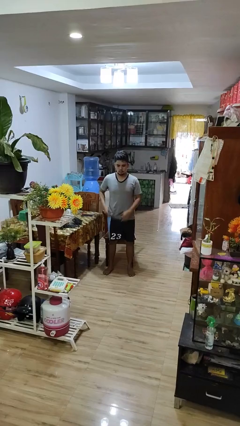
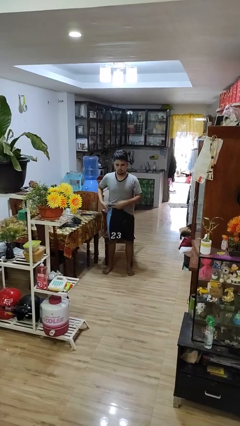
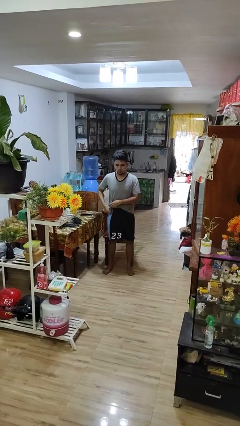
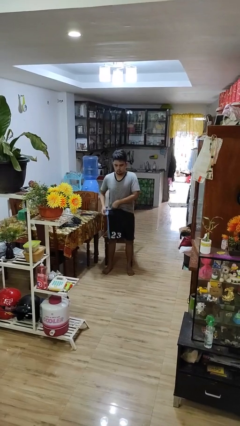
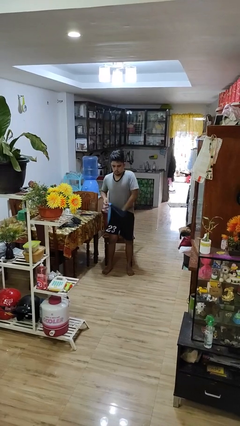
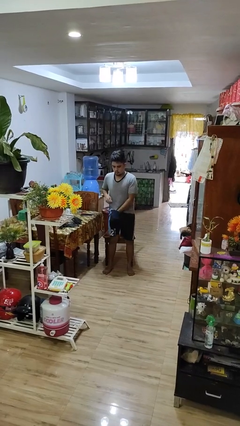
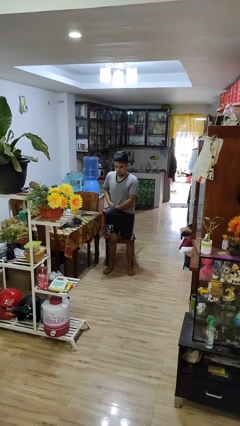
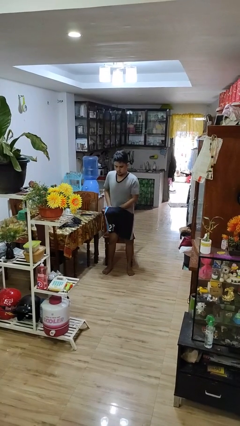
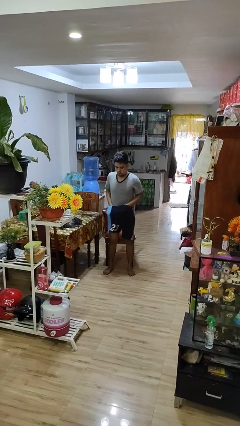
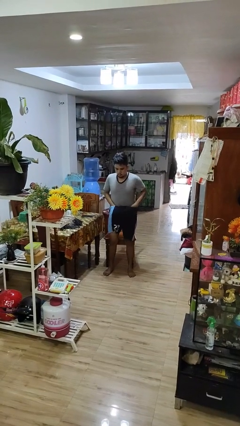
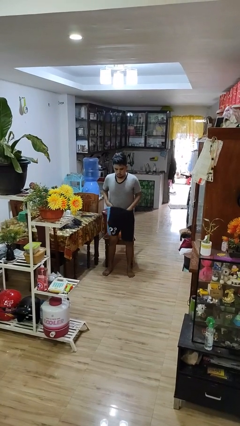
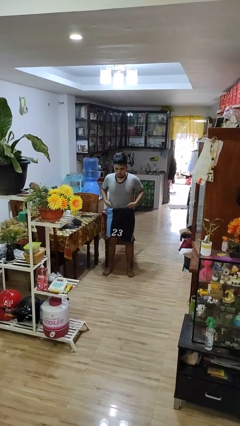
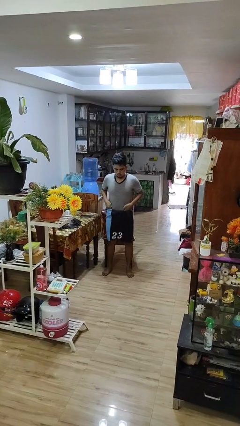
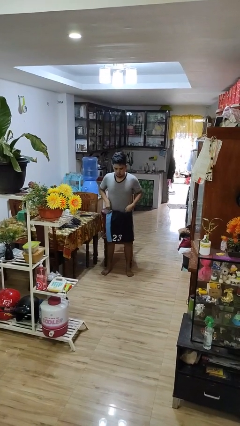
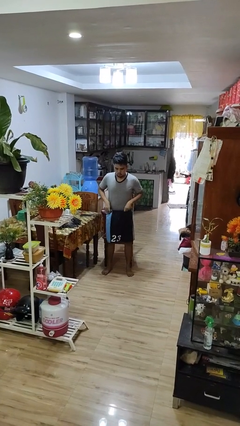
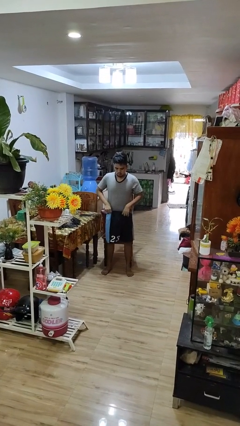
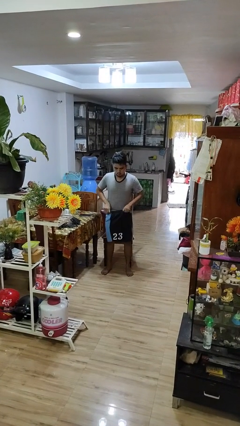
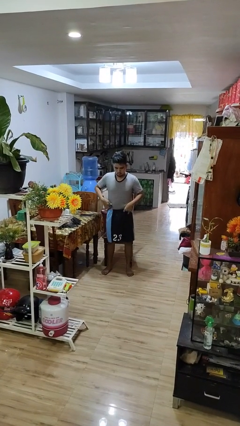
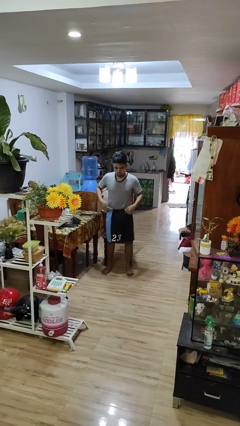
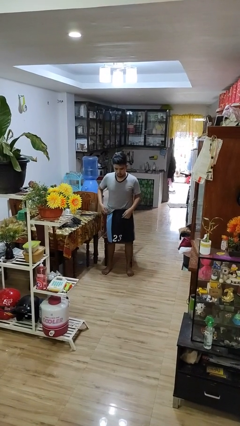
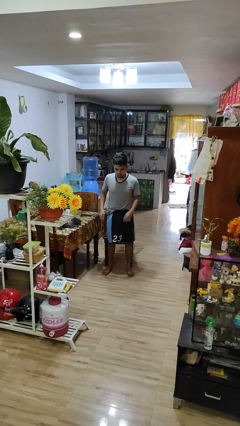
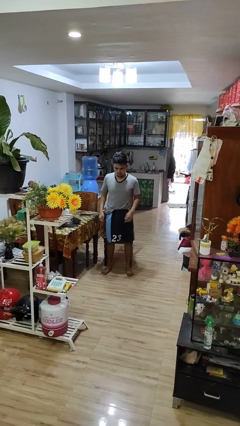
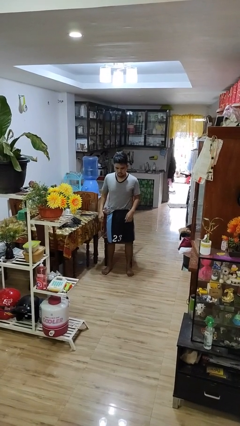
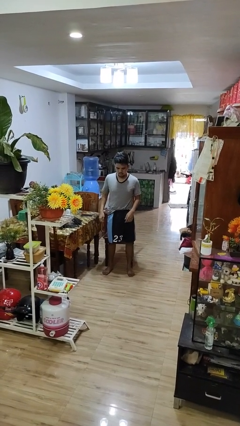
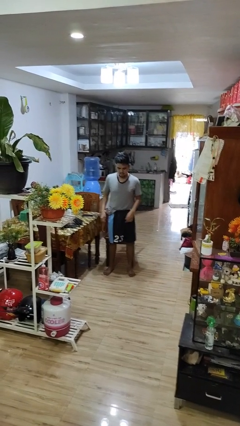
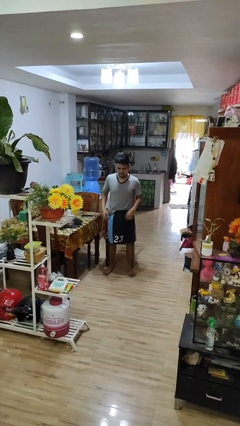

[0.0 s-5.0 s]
person tucks in shirt

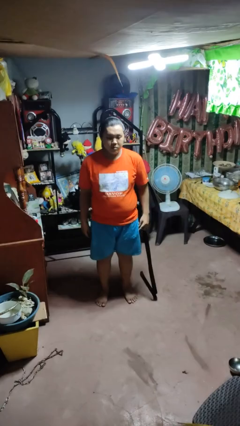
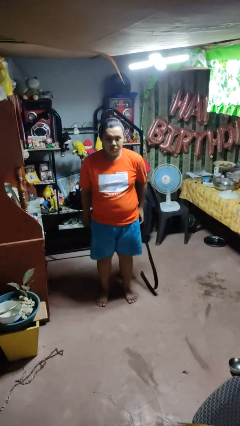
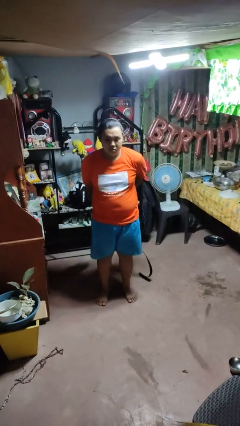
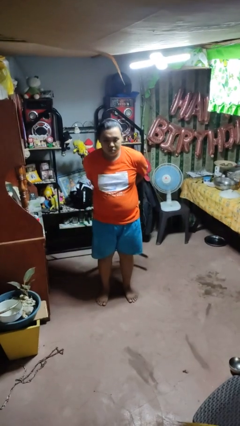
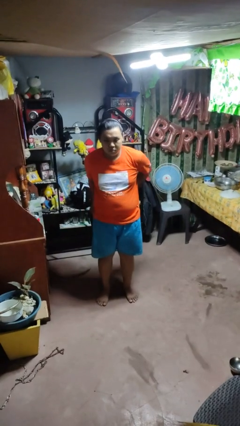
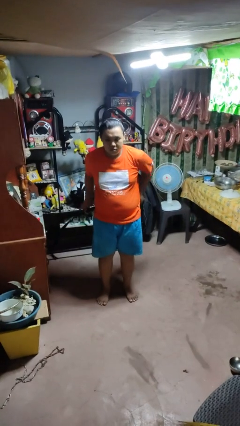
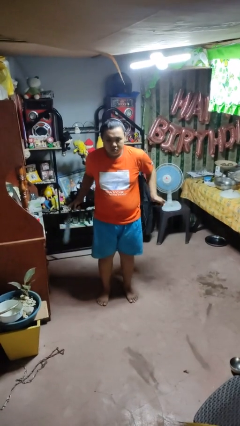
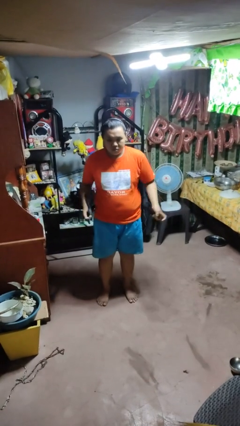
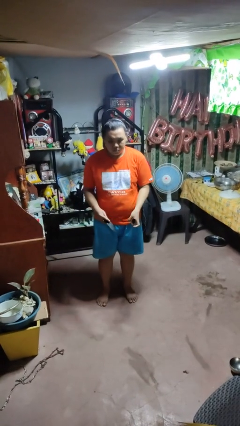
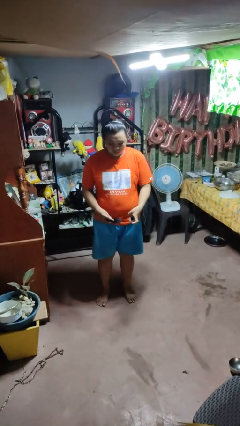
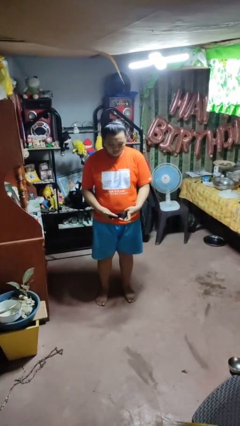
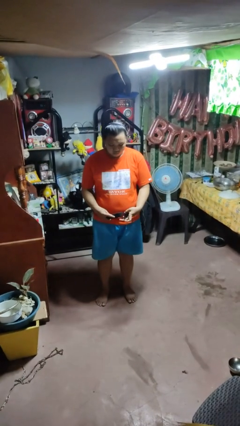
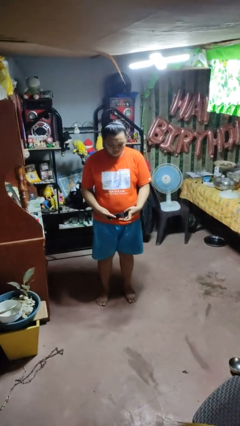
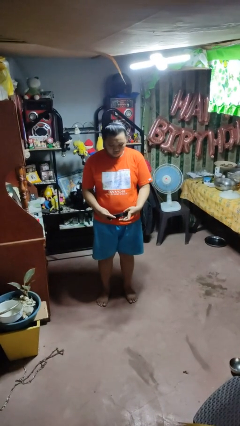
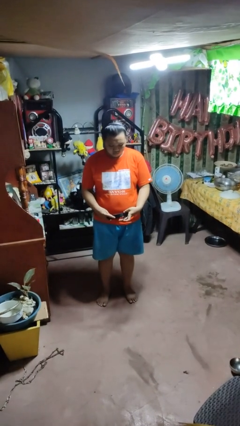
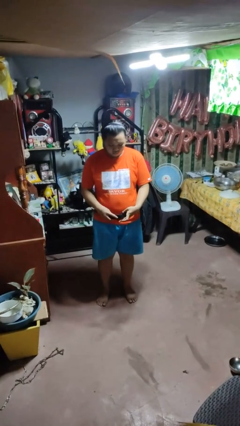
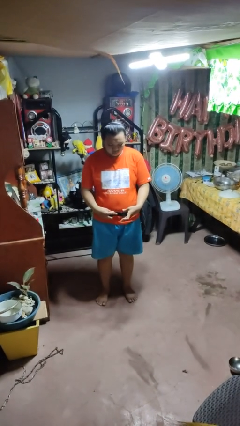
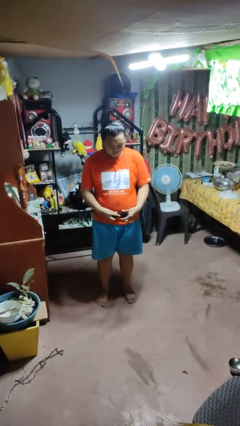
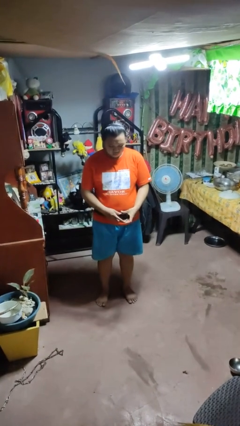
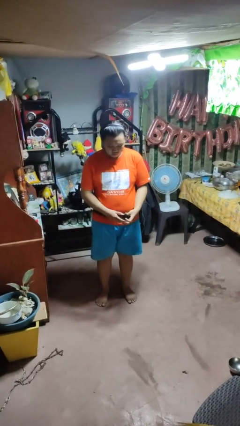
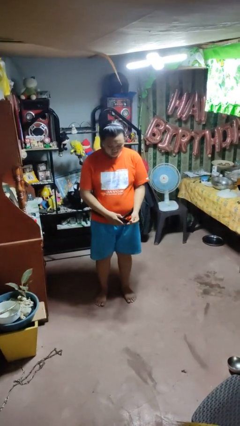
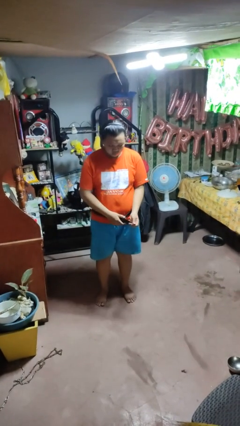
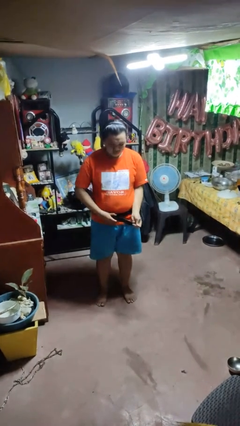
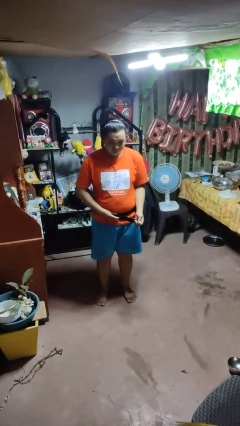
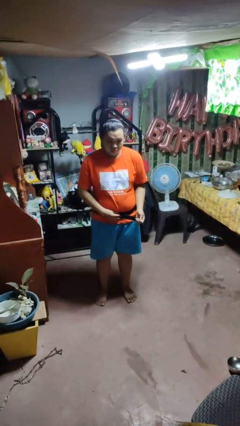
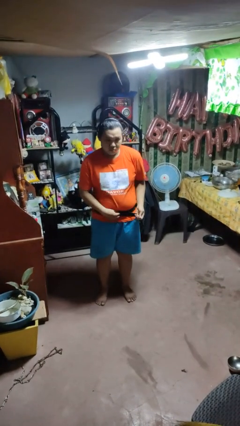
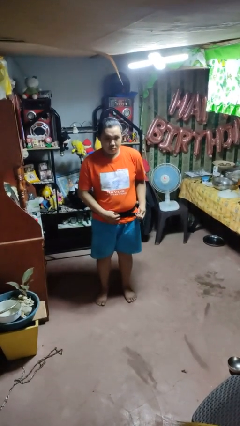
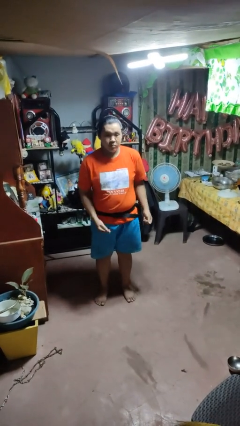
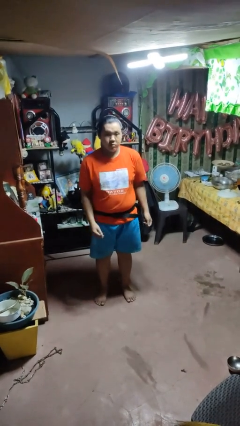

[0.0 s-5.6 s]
person puts on belt

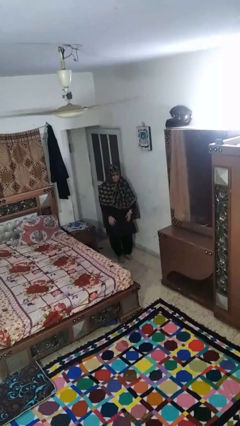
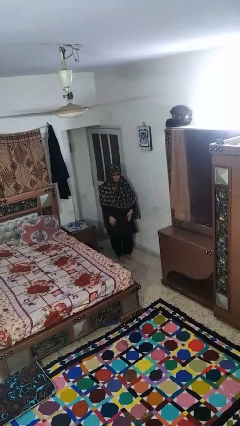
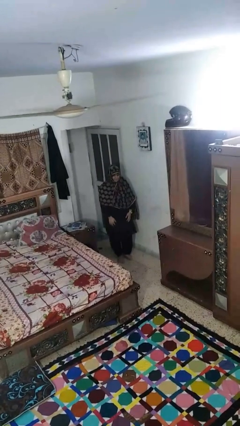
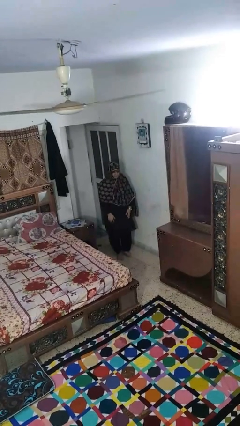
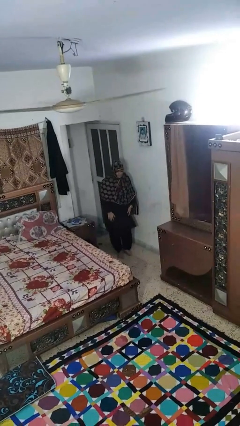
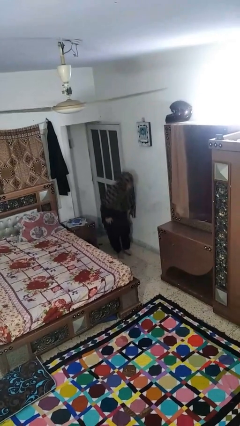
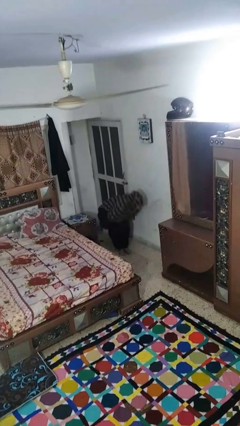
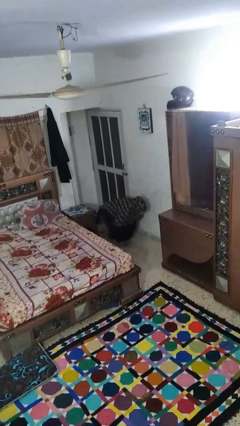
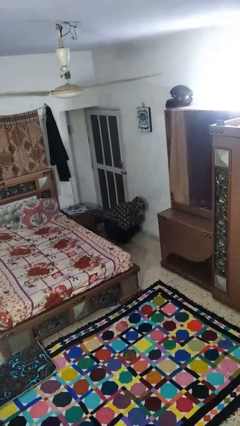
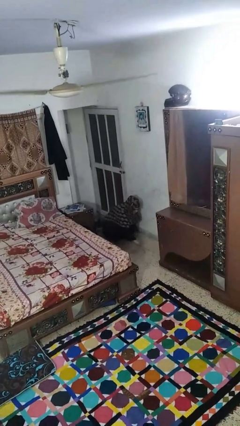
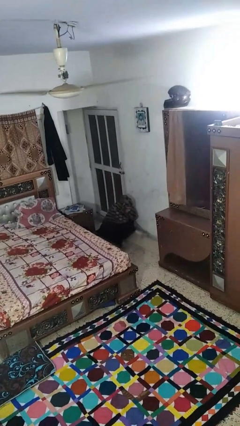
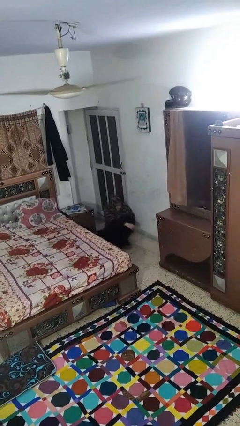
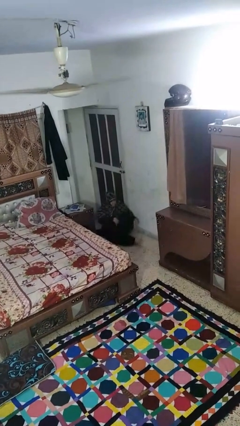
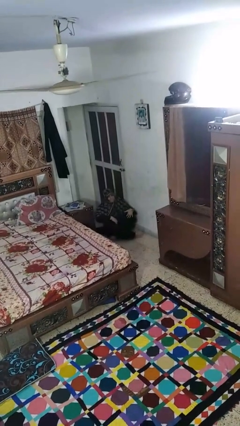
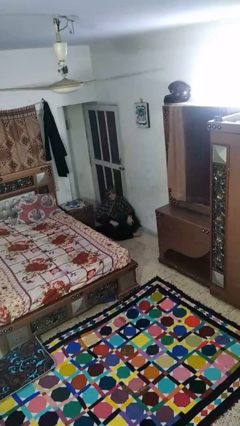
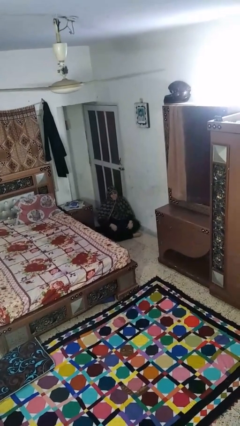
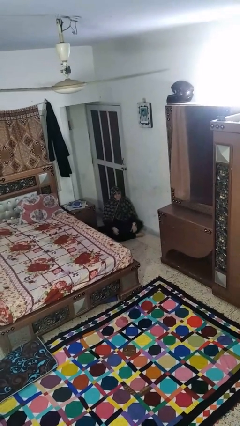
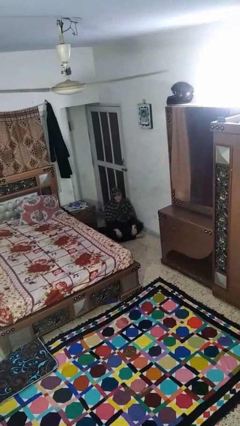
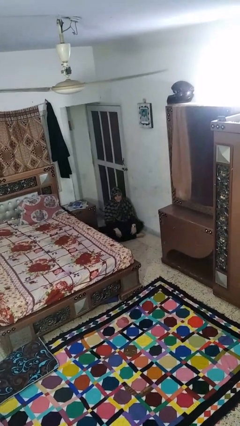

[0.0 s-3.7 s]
person sits crisscross

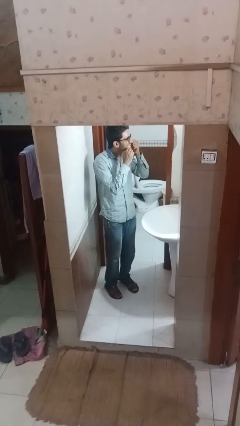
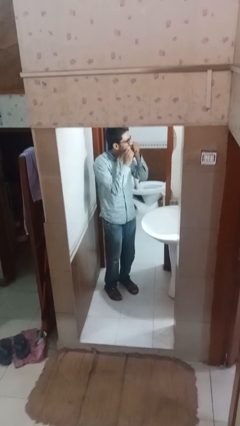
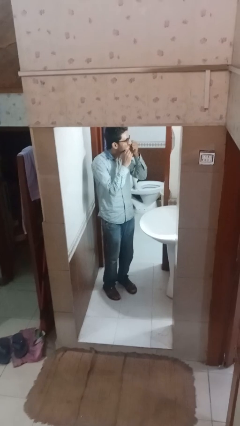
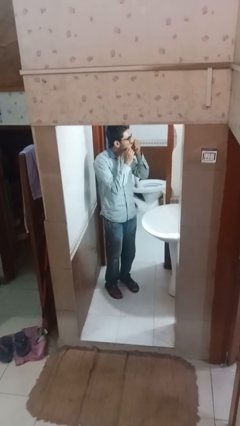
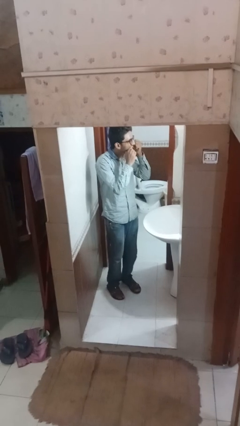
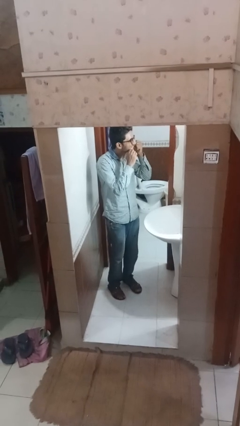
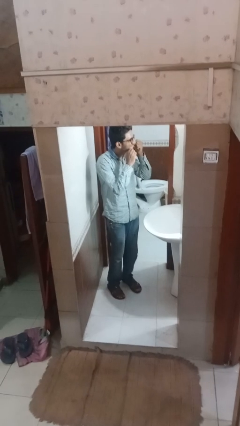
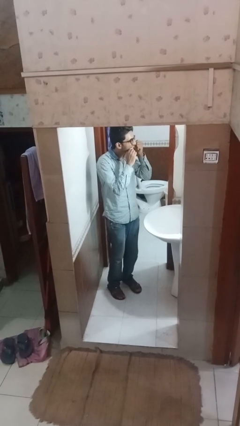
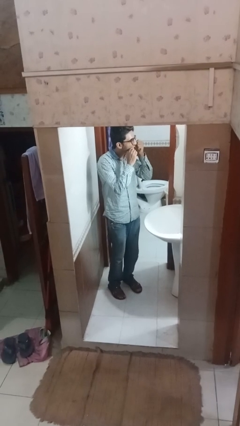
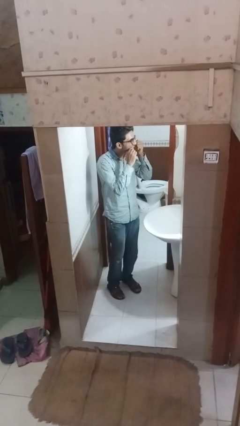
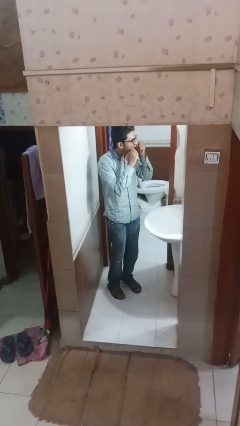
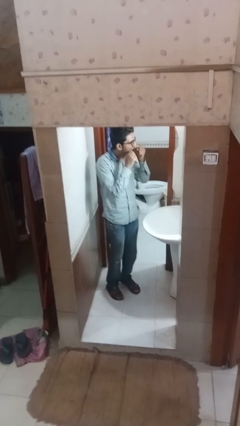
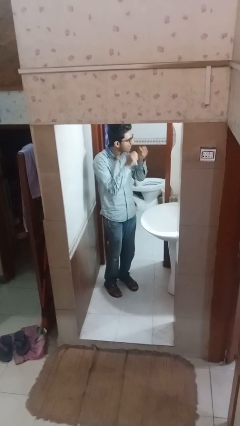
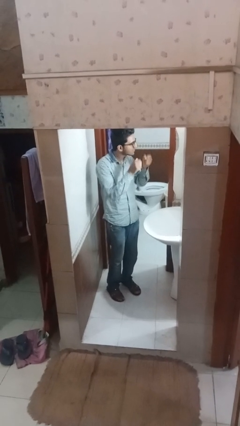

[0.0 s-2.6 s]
person flosses

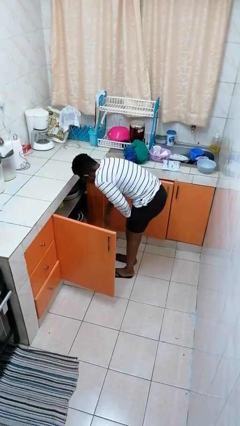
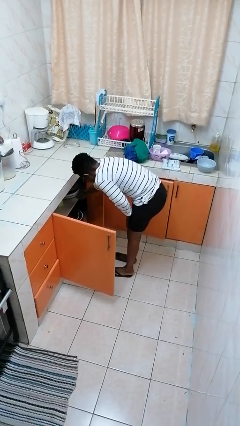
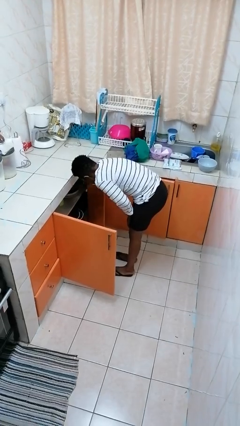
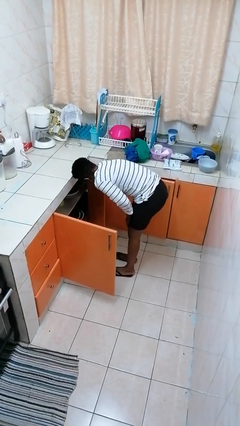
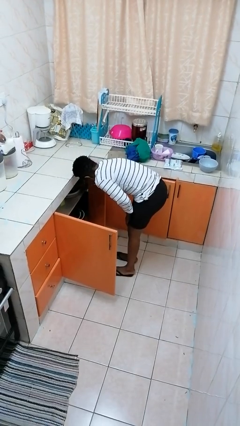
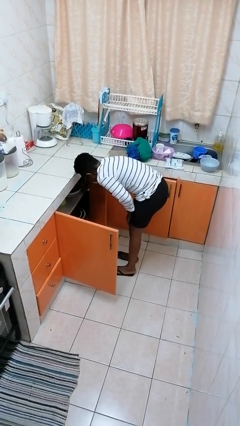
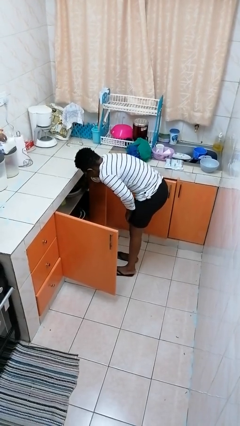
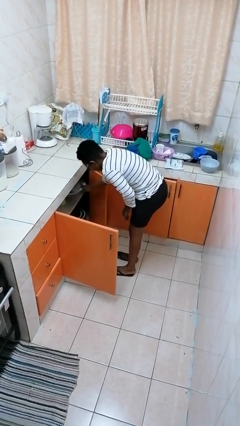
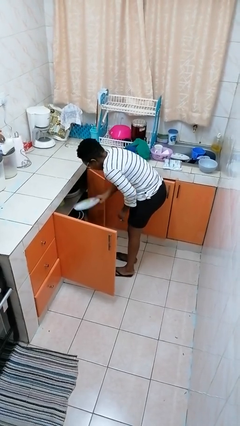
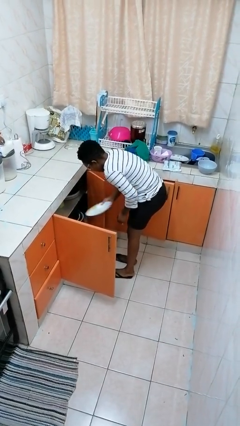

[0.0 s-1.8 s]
person takes object from cabinet
